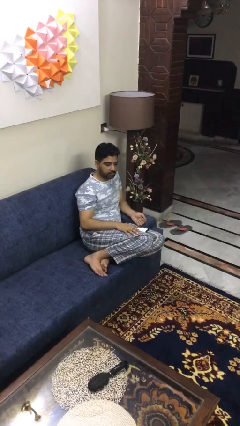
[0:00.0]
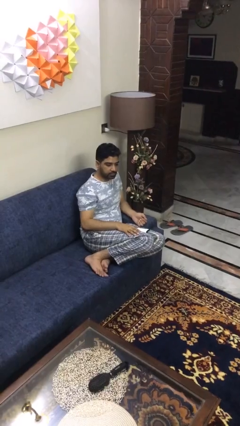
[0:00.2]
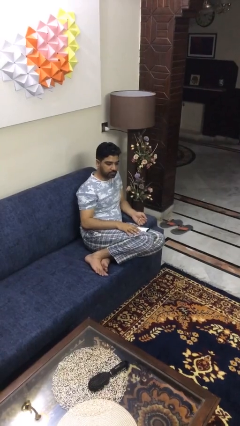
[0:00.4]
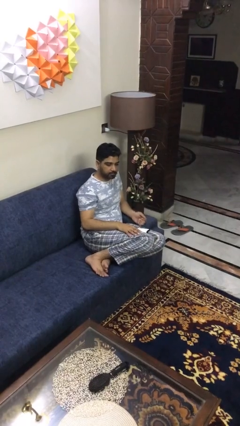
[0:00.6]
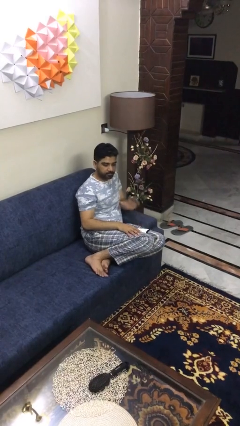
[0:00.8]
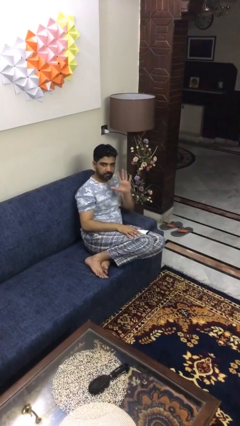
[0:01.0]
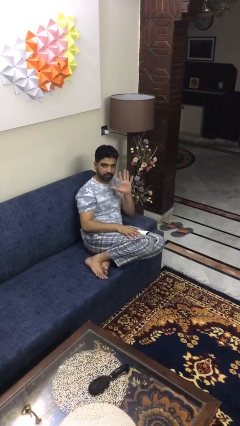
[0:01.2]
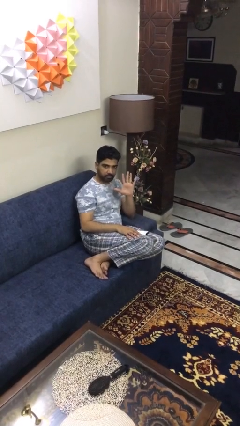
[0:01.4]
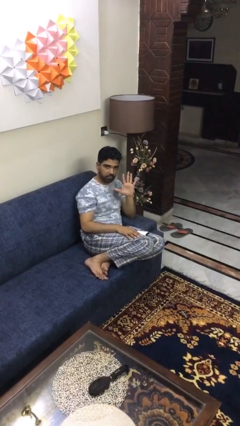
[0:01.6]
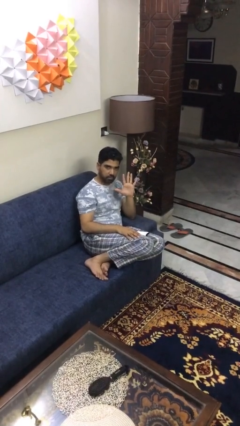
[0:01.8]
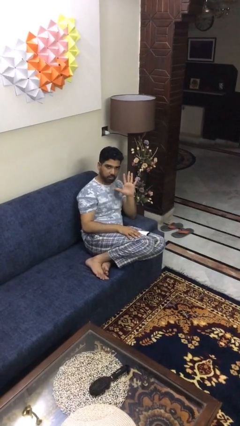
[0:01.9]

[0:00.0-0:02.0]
person gestures number five

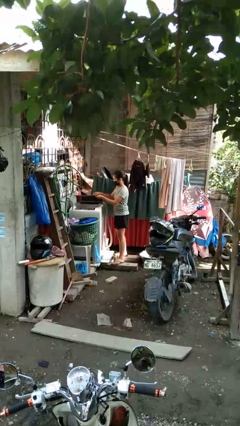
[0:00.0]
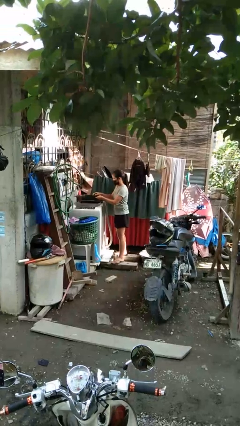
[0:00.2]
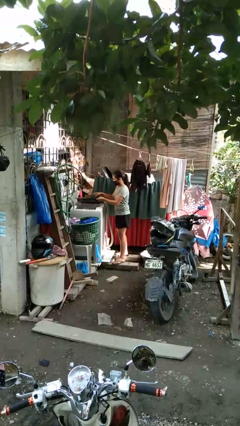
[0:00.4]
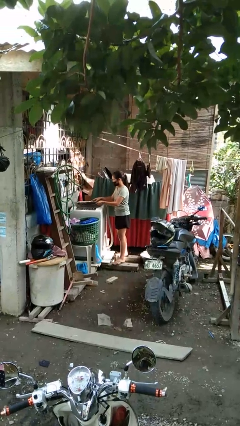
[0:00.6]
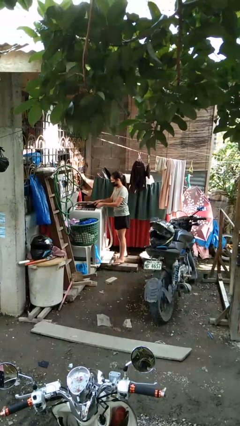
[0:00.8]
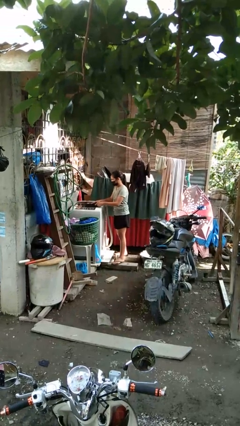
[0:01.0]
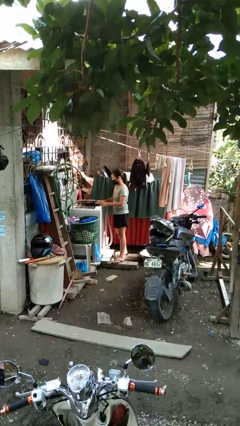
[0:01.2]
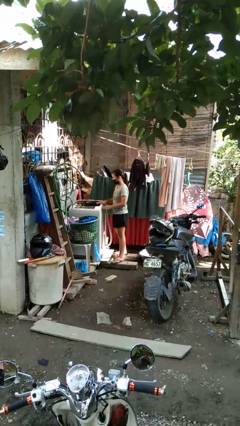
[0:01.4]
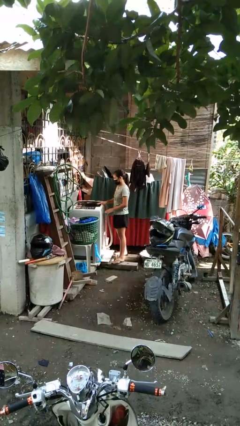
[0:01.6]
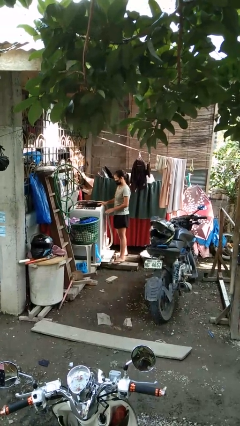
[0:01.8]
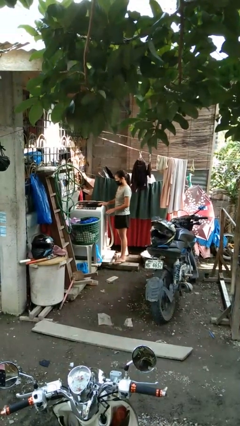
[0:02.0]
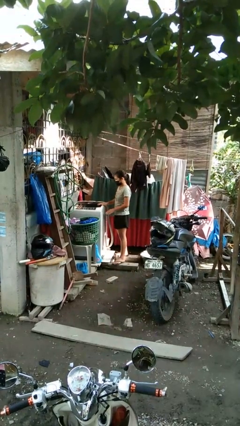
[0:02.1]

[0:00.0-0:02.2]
person closes clothes washer

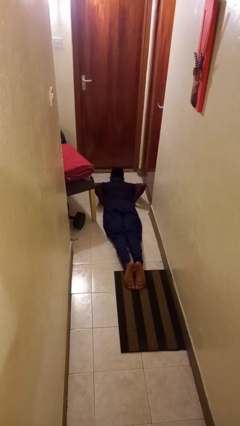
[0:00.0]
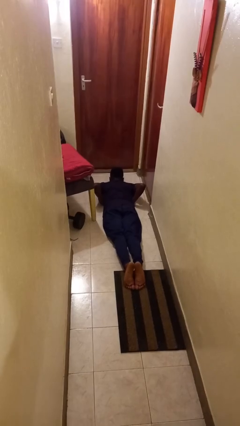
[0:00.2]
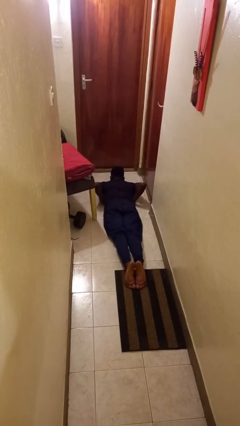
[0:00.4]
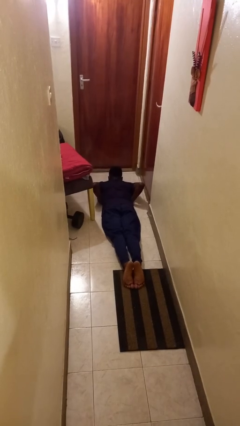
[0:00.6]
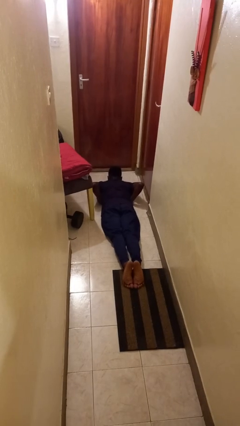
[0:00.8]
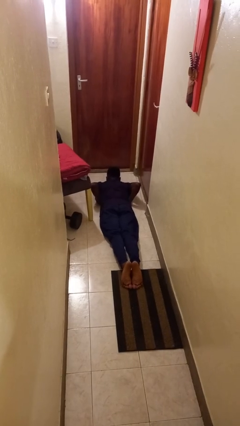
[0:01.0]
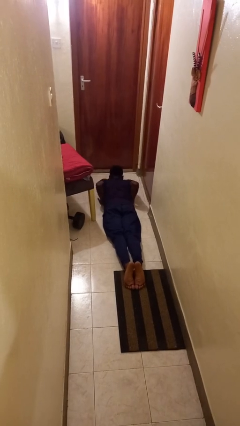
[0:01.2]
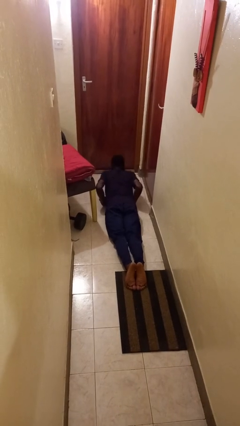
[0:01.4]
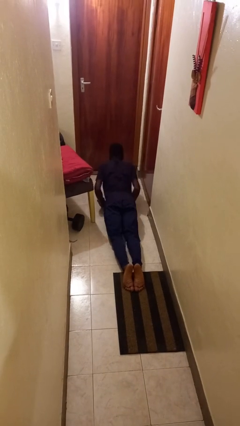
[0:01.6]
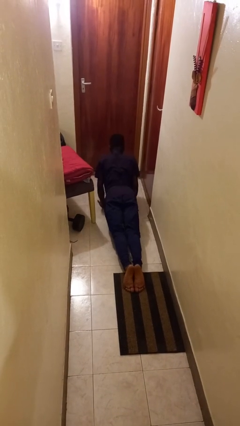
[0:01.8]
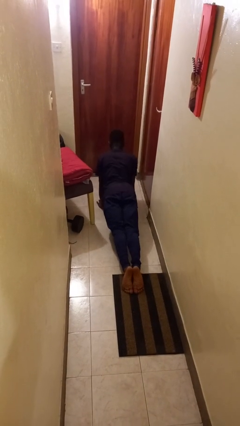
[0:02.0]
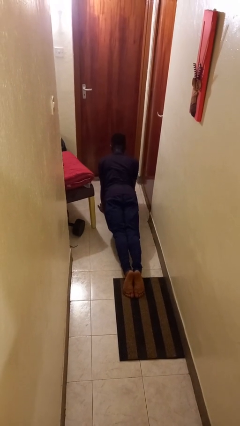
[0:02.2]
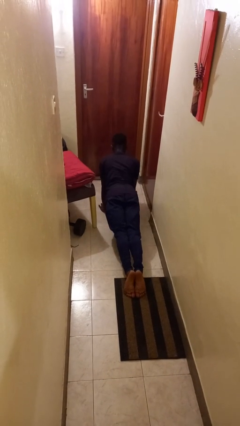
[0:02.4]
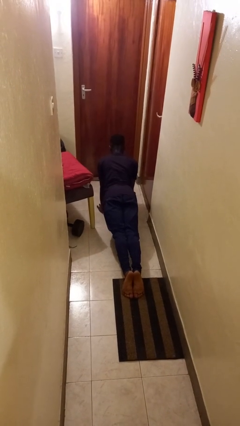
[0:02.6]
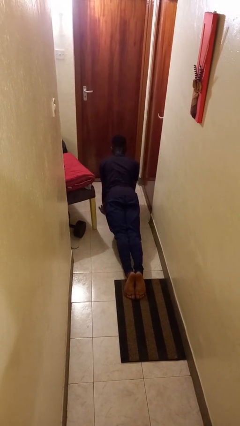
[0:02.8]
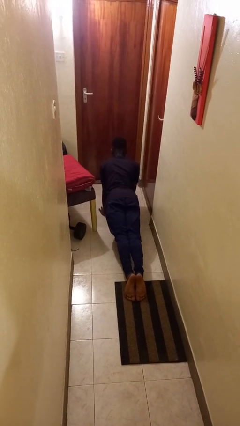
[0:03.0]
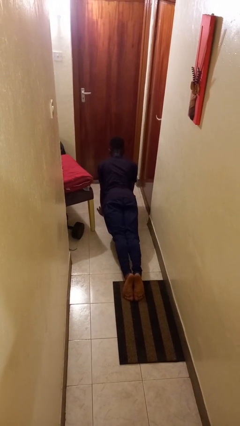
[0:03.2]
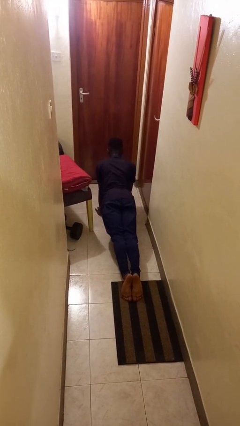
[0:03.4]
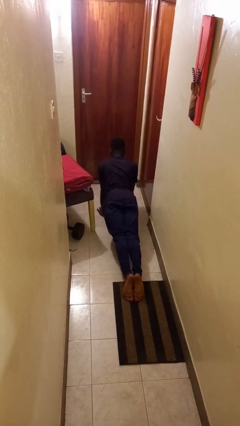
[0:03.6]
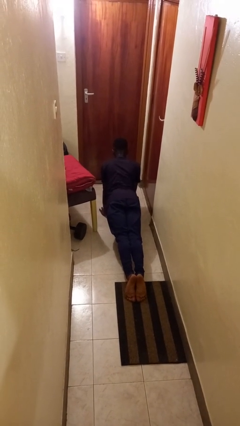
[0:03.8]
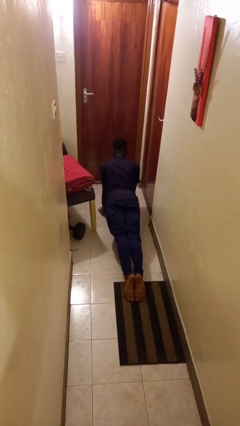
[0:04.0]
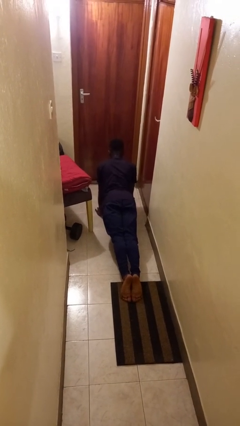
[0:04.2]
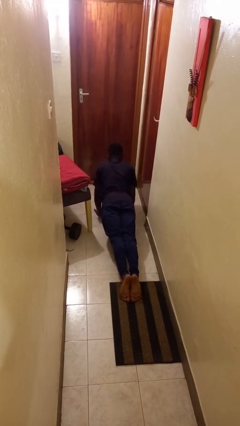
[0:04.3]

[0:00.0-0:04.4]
person exercises with pushup

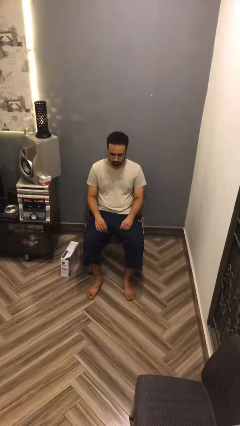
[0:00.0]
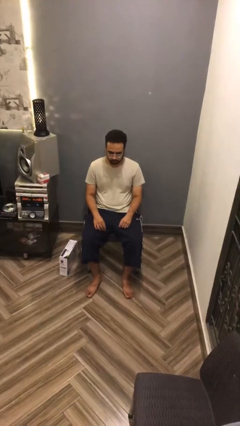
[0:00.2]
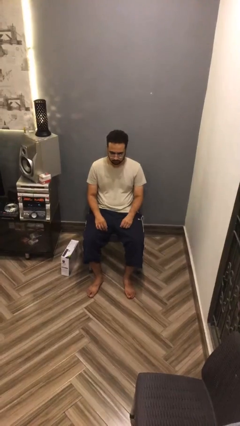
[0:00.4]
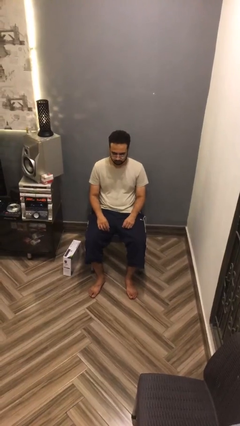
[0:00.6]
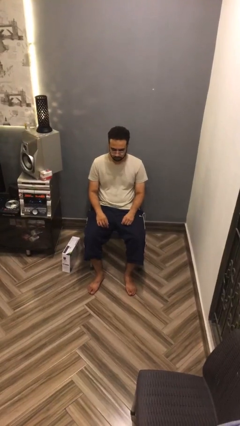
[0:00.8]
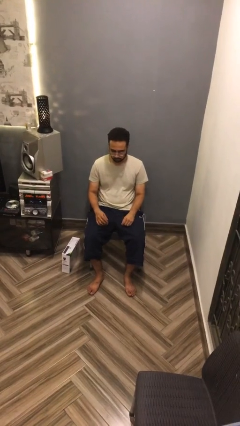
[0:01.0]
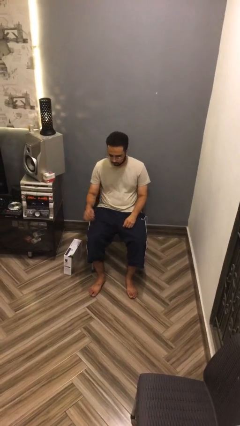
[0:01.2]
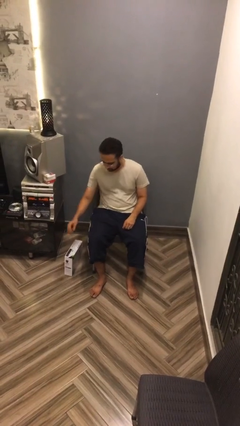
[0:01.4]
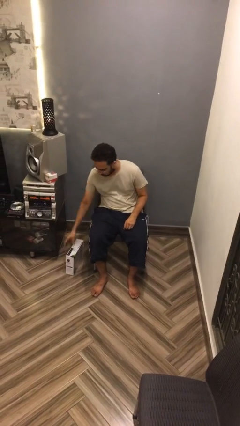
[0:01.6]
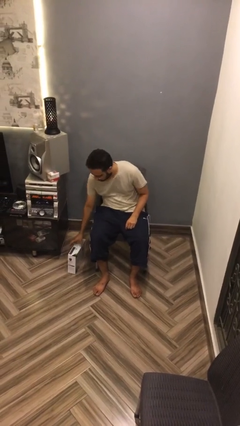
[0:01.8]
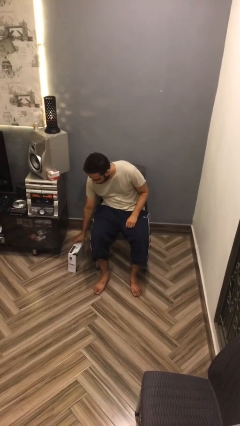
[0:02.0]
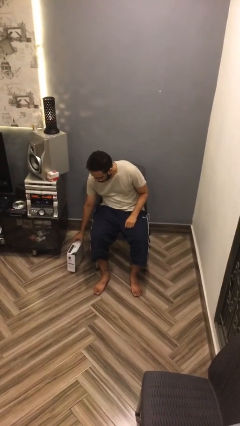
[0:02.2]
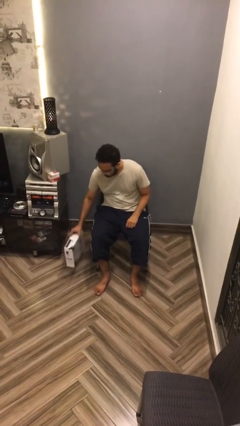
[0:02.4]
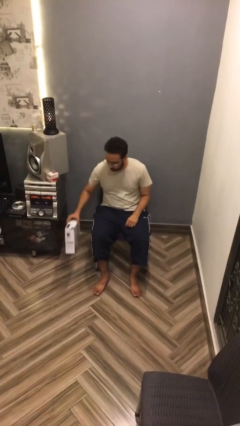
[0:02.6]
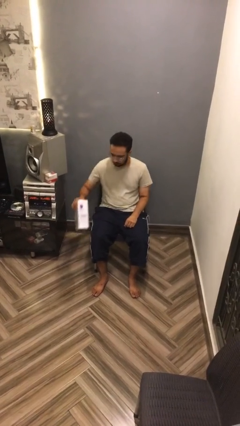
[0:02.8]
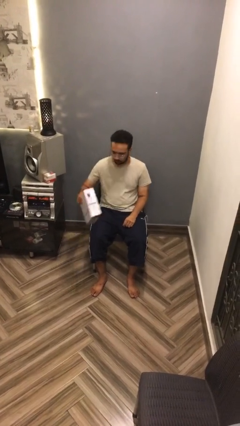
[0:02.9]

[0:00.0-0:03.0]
person picks up object from floor

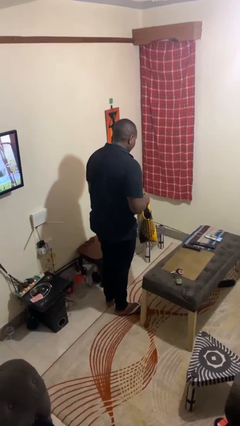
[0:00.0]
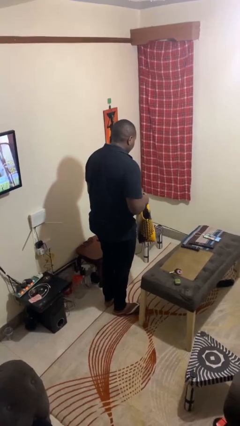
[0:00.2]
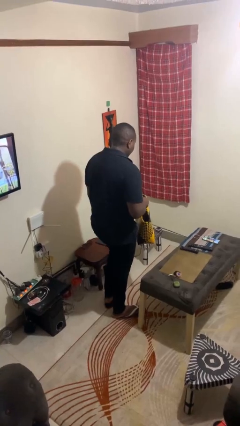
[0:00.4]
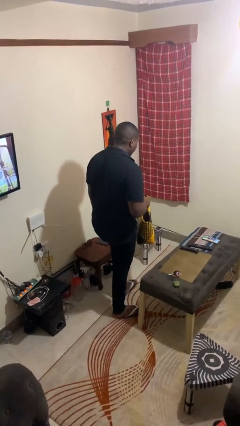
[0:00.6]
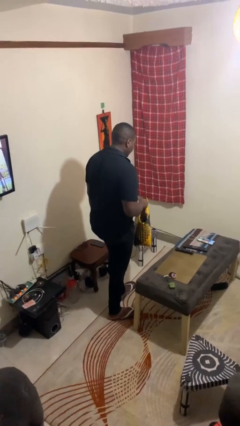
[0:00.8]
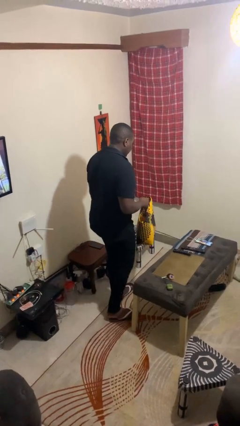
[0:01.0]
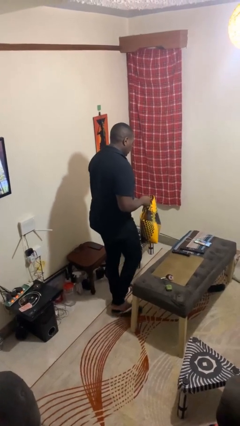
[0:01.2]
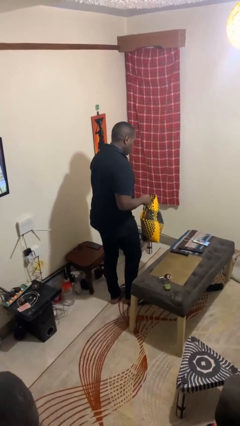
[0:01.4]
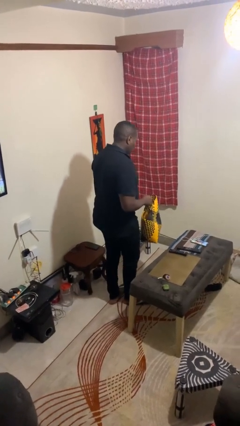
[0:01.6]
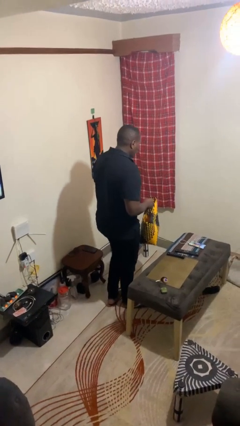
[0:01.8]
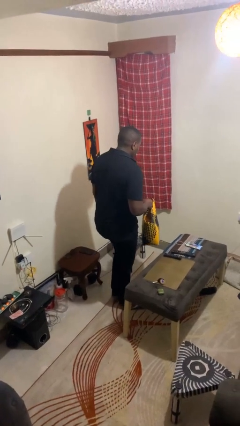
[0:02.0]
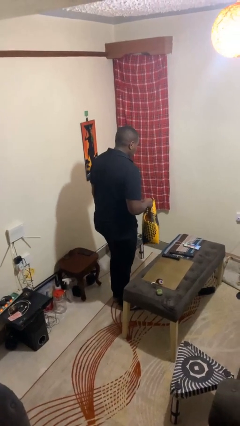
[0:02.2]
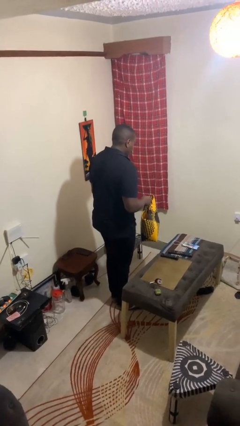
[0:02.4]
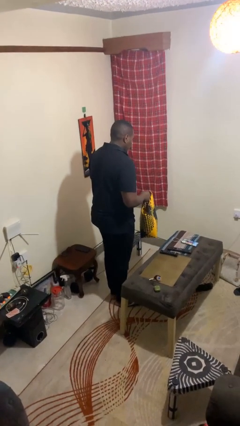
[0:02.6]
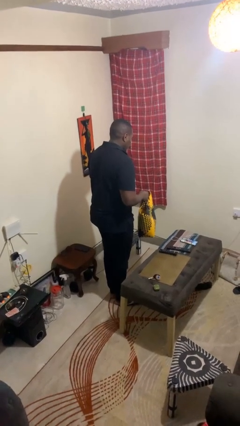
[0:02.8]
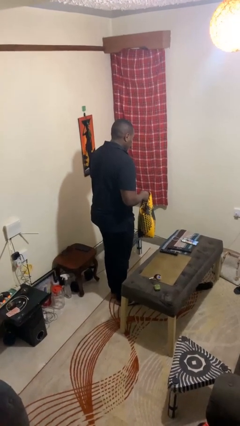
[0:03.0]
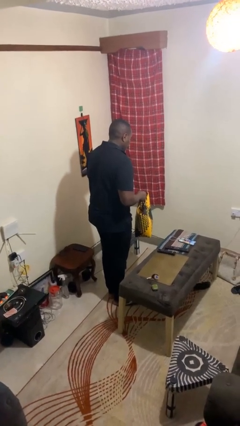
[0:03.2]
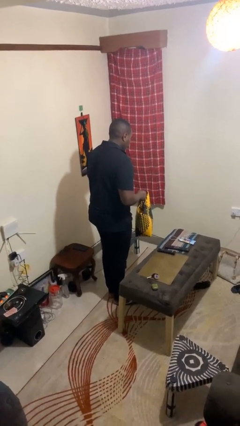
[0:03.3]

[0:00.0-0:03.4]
person carries groceries

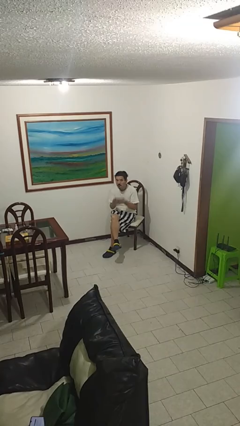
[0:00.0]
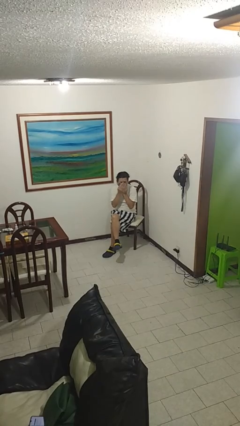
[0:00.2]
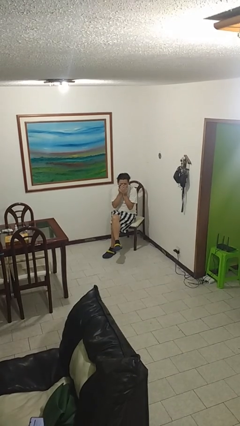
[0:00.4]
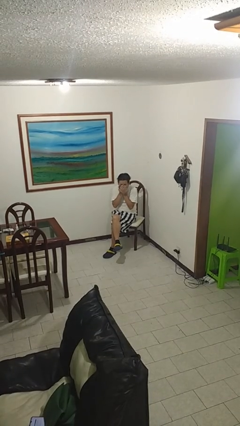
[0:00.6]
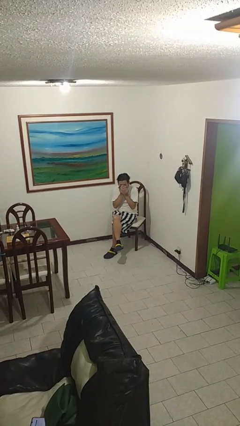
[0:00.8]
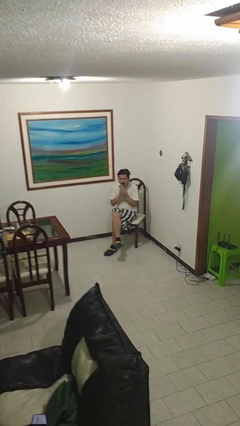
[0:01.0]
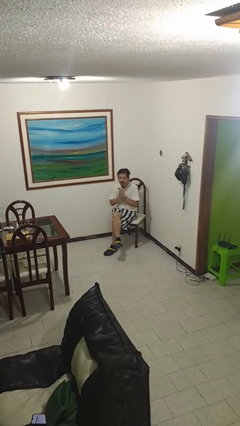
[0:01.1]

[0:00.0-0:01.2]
person blows nose

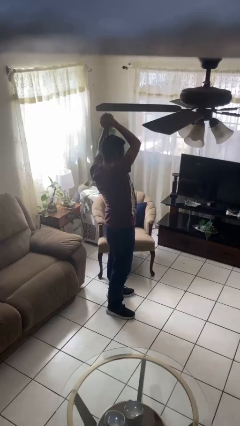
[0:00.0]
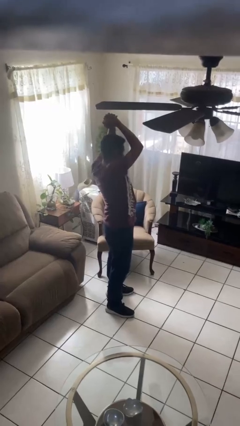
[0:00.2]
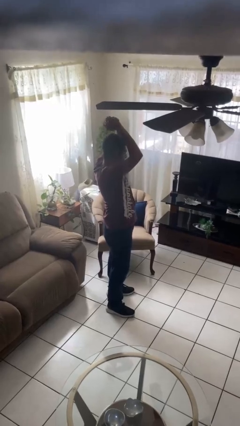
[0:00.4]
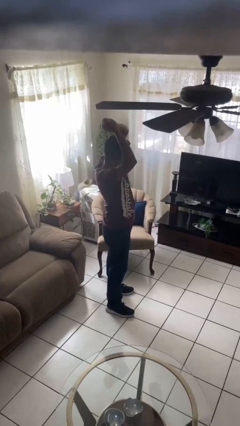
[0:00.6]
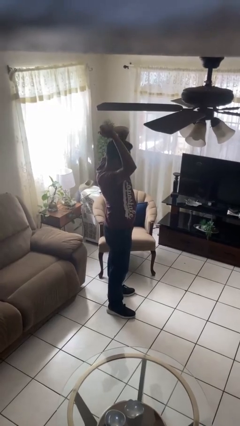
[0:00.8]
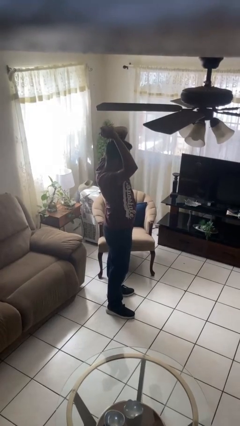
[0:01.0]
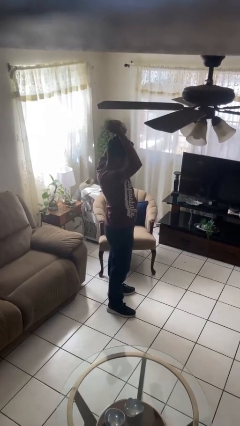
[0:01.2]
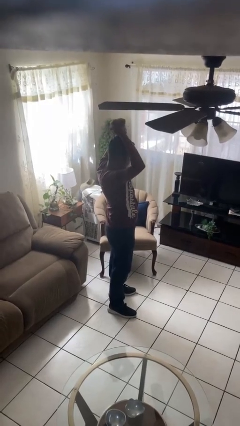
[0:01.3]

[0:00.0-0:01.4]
person stretches arms over head
